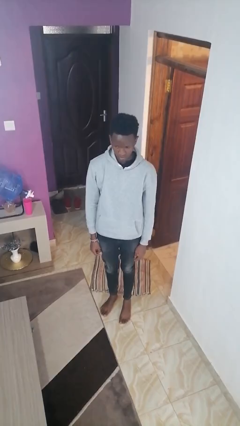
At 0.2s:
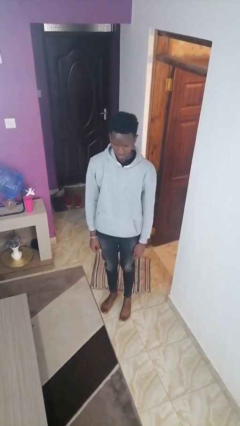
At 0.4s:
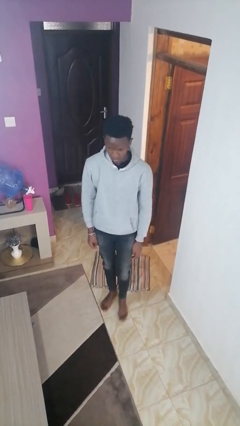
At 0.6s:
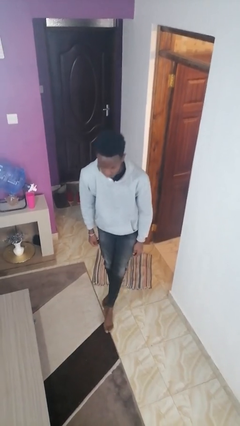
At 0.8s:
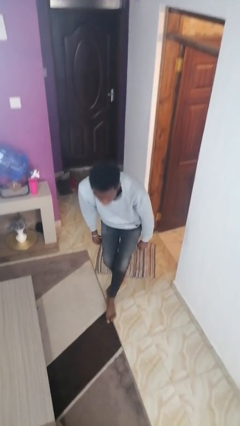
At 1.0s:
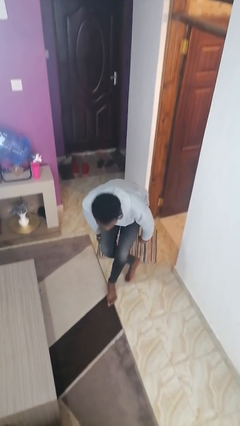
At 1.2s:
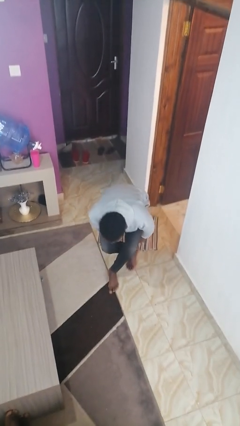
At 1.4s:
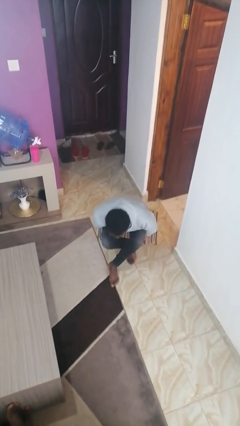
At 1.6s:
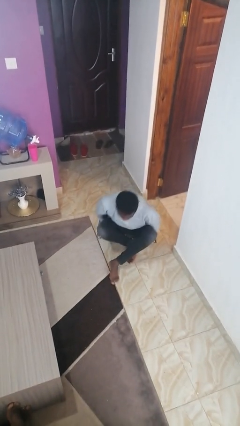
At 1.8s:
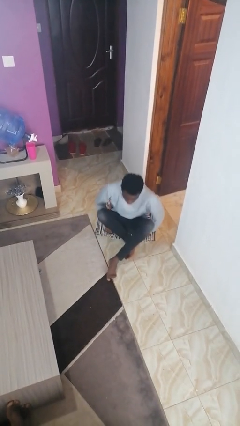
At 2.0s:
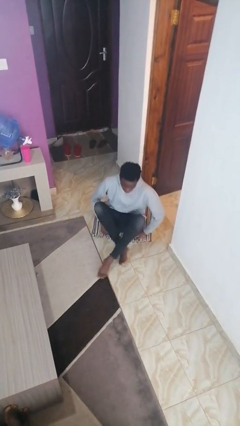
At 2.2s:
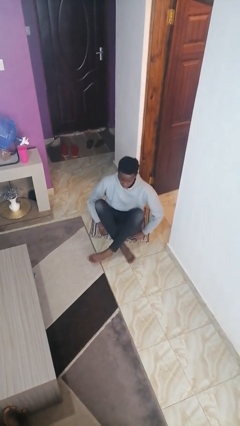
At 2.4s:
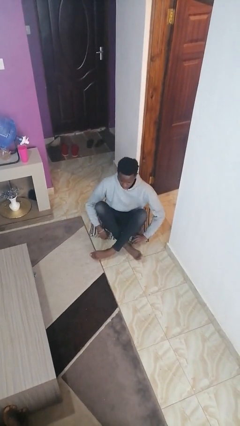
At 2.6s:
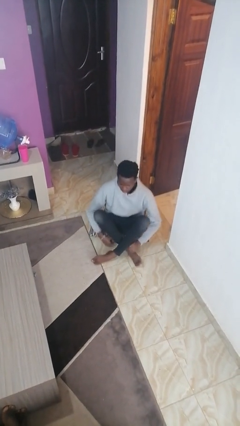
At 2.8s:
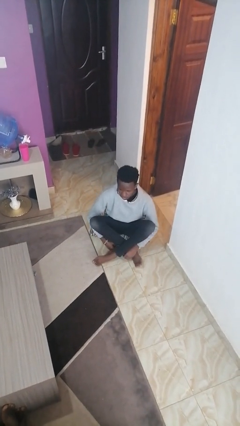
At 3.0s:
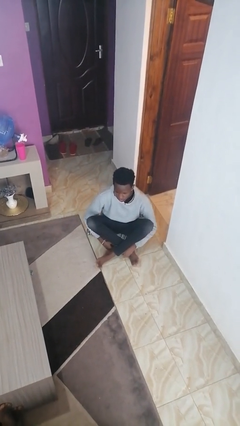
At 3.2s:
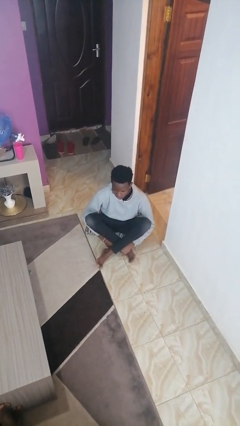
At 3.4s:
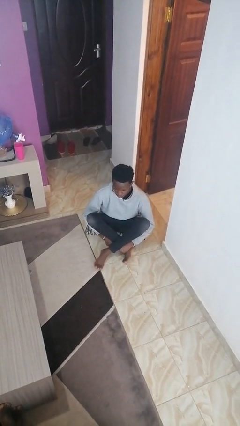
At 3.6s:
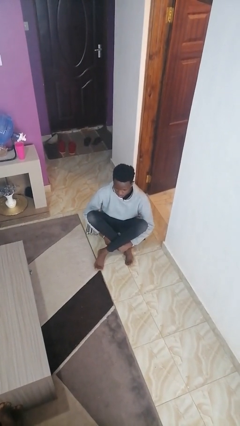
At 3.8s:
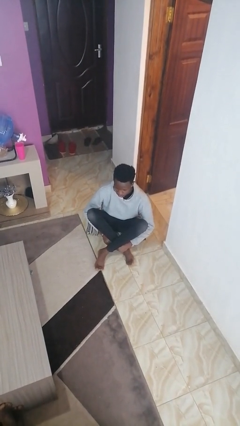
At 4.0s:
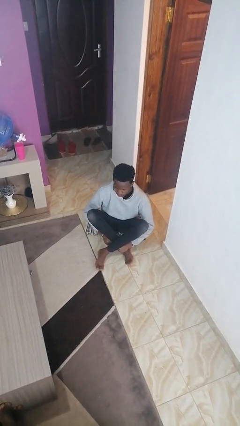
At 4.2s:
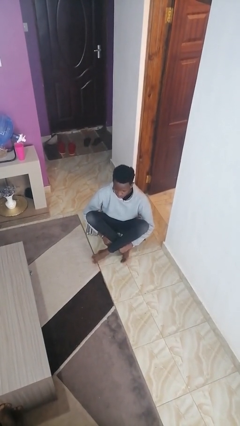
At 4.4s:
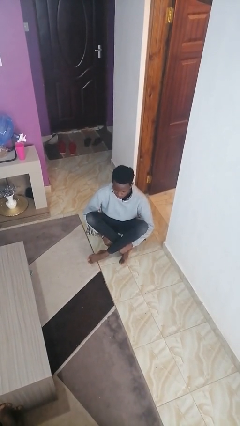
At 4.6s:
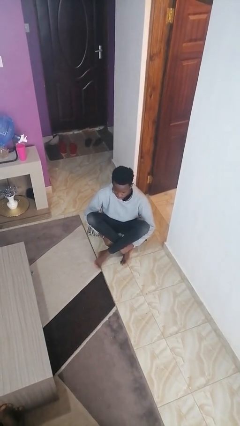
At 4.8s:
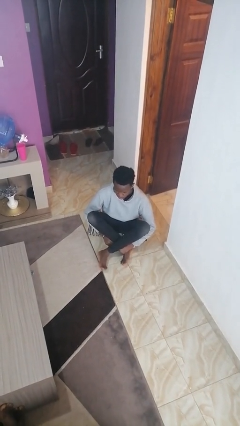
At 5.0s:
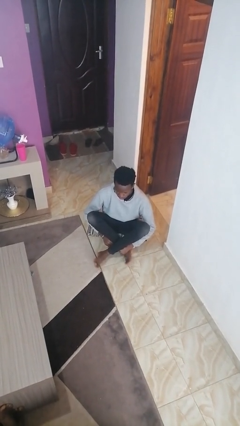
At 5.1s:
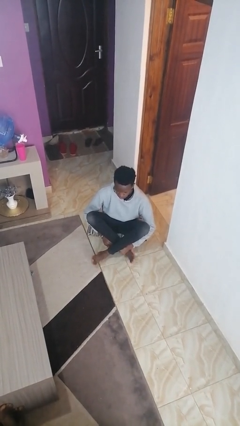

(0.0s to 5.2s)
person sits crisscross

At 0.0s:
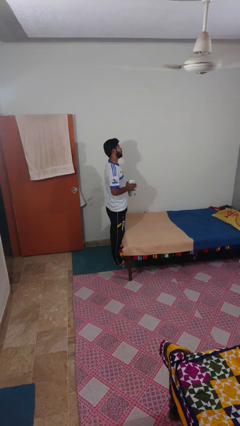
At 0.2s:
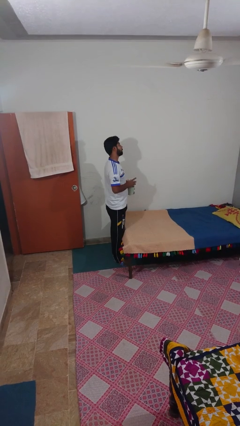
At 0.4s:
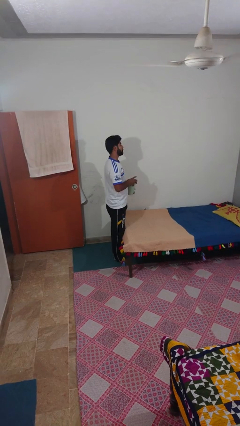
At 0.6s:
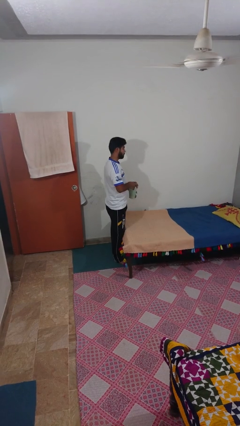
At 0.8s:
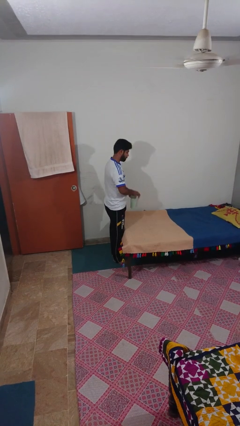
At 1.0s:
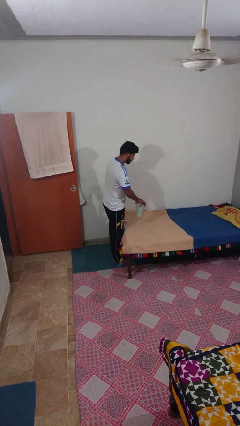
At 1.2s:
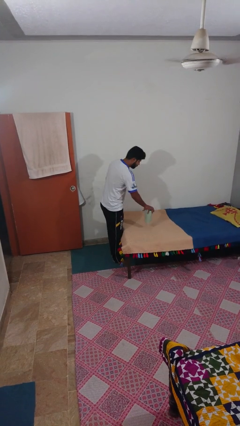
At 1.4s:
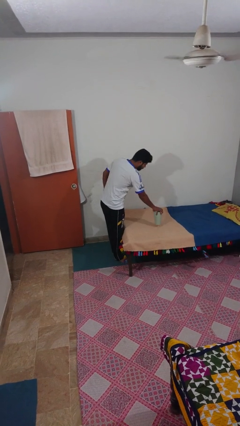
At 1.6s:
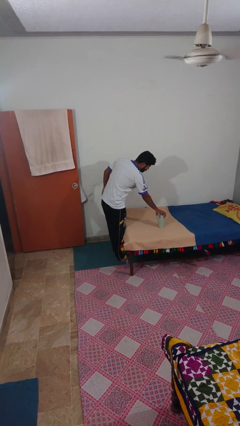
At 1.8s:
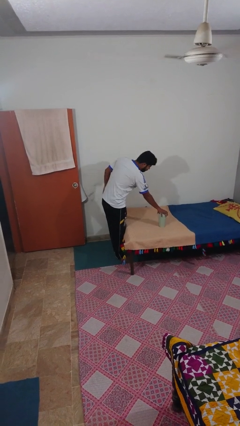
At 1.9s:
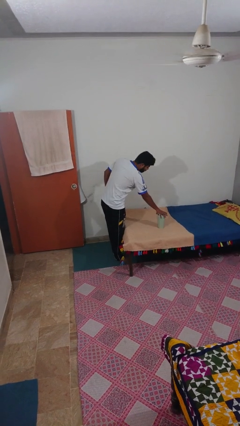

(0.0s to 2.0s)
person puts down object on bed

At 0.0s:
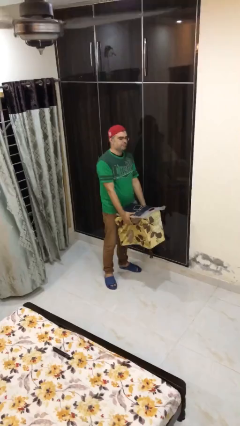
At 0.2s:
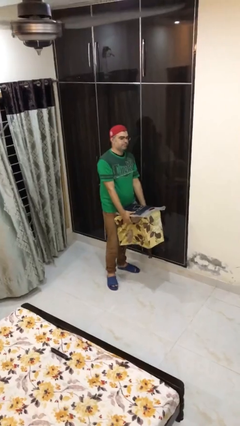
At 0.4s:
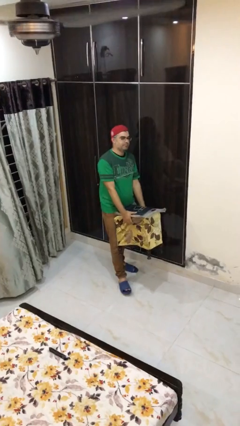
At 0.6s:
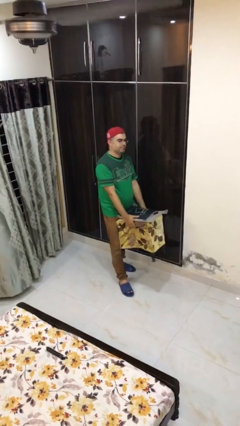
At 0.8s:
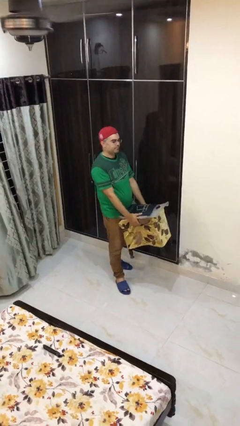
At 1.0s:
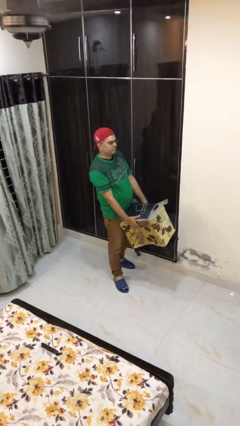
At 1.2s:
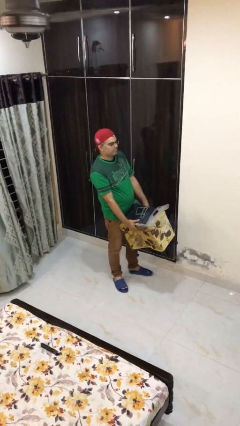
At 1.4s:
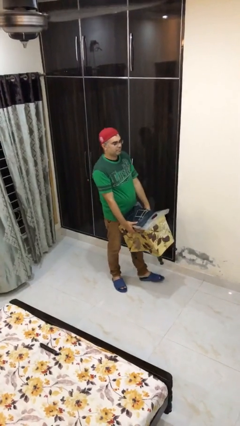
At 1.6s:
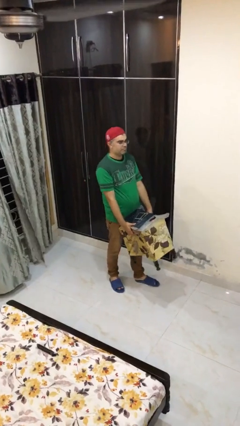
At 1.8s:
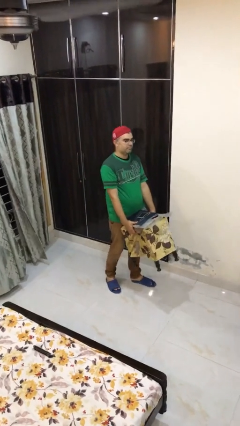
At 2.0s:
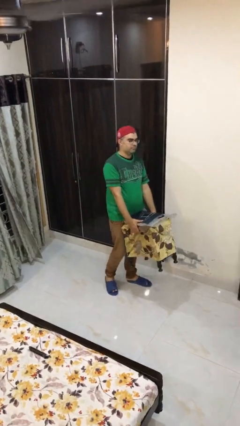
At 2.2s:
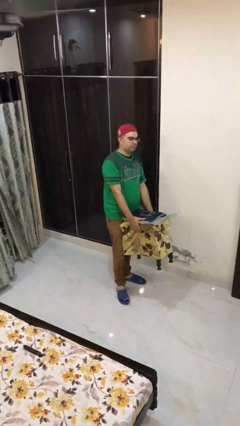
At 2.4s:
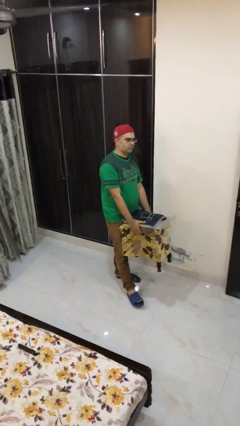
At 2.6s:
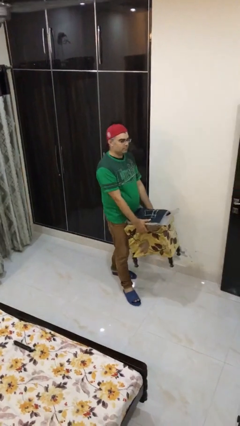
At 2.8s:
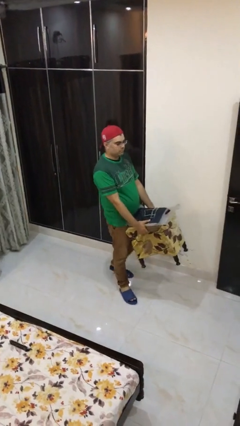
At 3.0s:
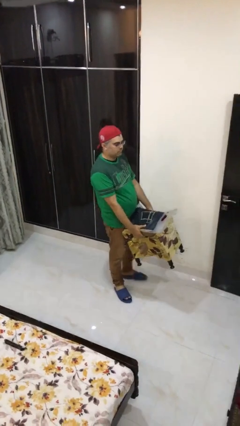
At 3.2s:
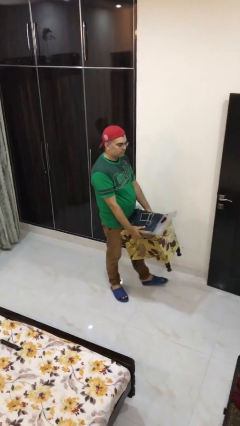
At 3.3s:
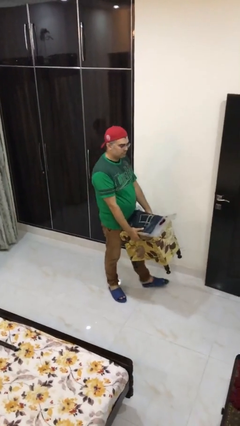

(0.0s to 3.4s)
person carries heavy object

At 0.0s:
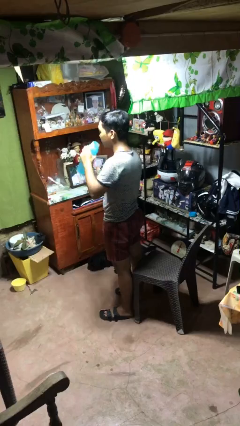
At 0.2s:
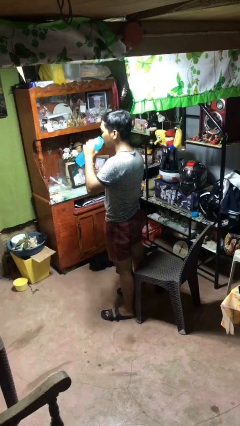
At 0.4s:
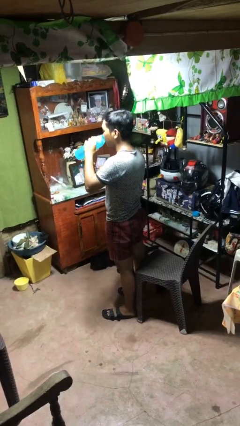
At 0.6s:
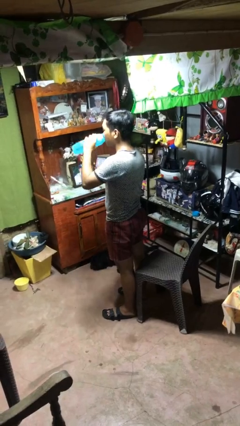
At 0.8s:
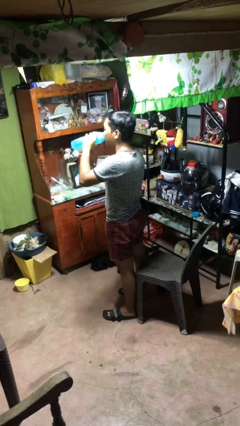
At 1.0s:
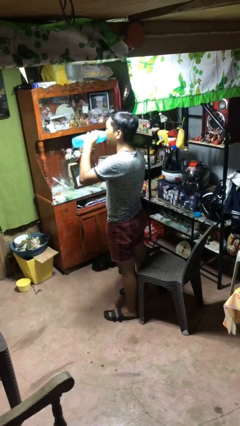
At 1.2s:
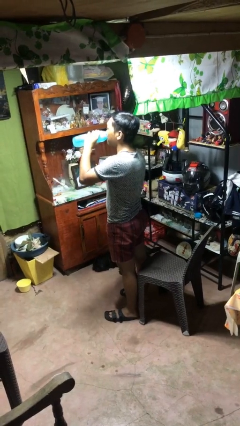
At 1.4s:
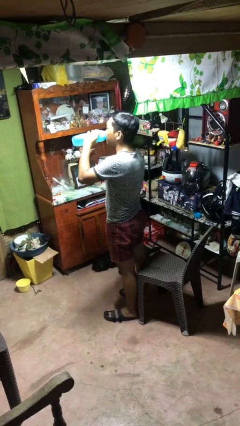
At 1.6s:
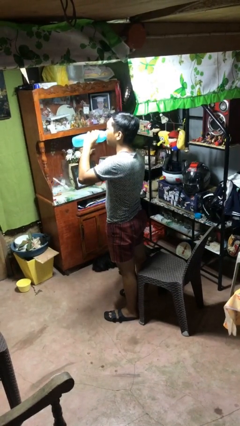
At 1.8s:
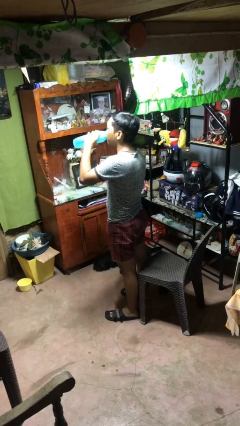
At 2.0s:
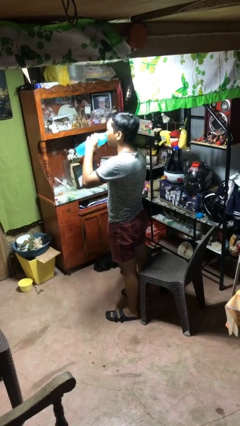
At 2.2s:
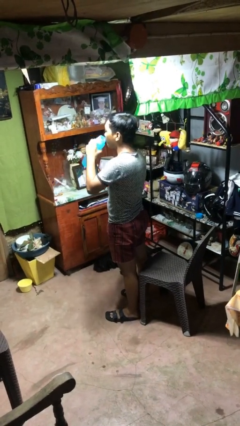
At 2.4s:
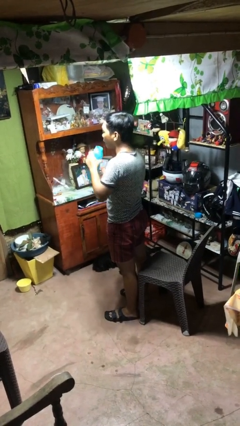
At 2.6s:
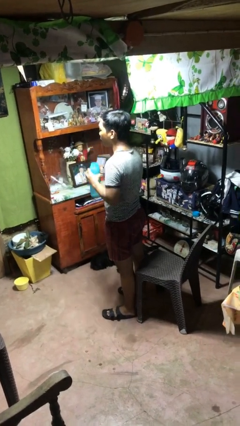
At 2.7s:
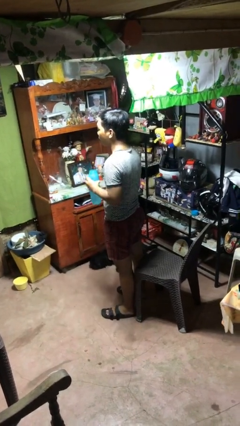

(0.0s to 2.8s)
person drinks from bottle

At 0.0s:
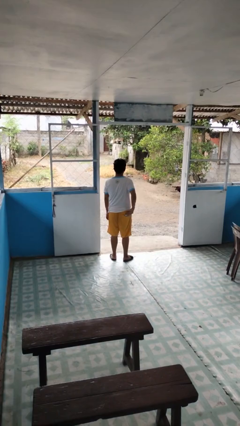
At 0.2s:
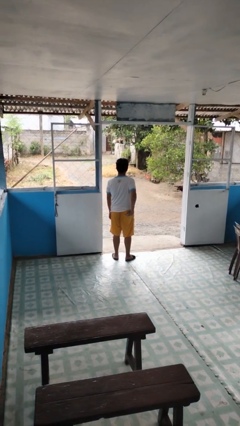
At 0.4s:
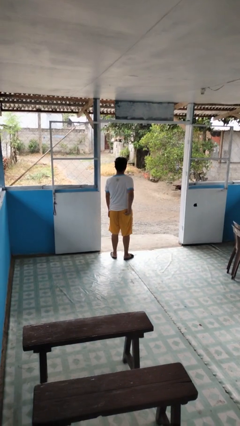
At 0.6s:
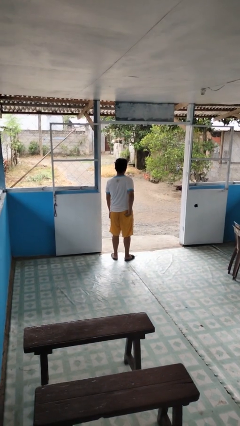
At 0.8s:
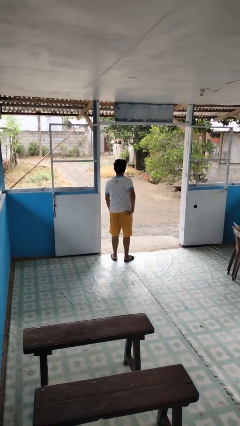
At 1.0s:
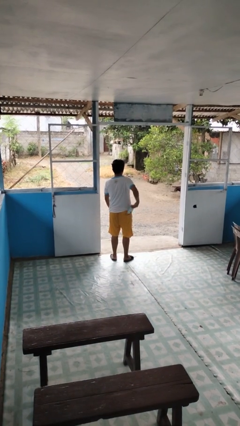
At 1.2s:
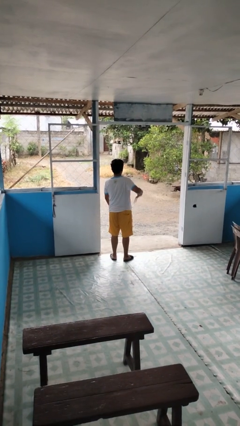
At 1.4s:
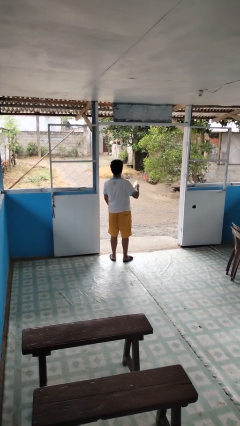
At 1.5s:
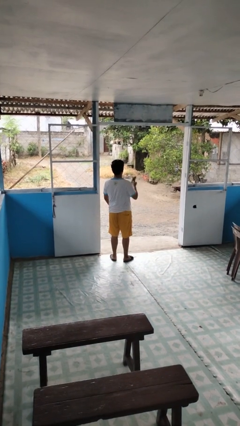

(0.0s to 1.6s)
person takes phone from pocket

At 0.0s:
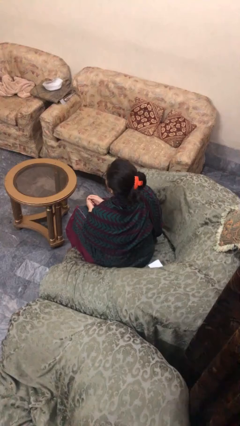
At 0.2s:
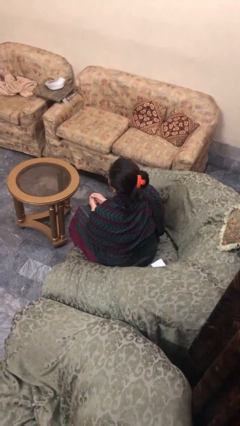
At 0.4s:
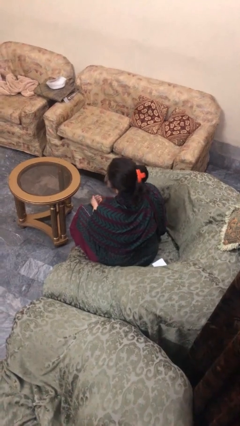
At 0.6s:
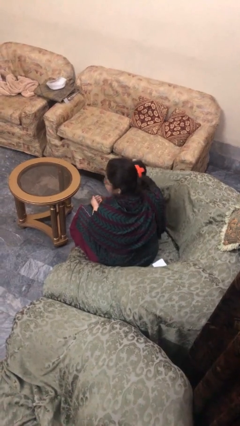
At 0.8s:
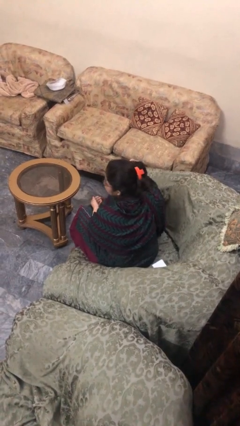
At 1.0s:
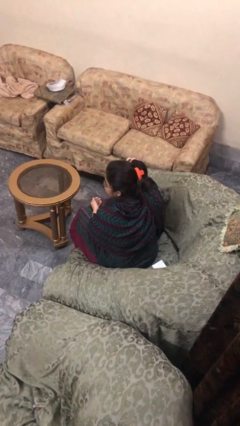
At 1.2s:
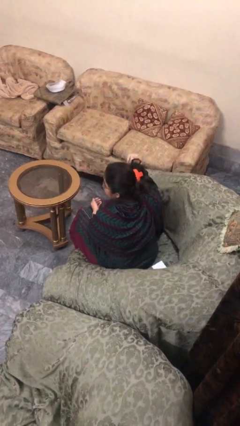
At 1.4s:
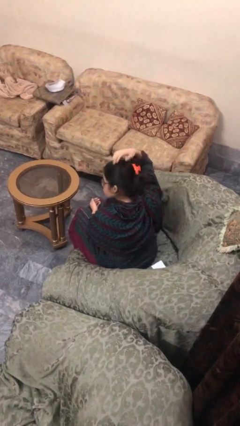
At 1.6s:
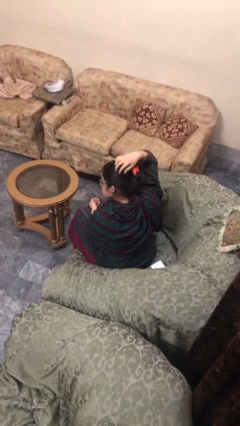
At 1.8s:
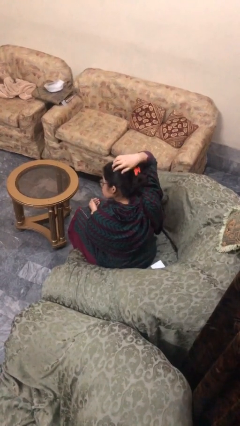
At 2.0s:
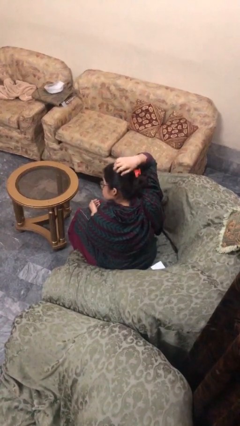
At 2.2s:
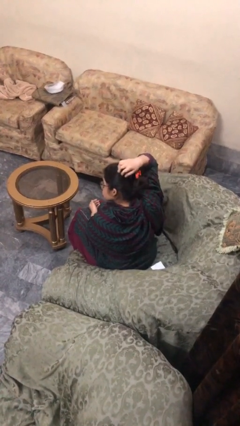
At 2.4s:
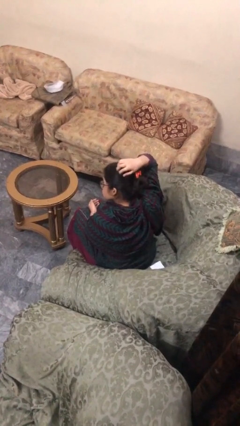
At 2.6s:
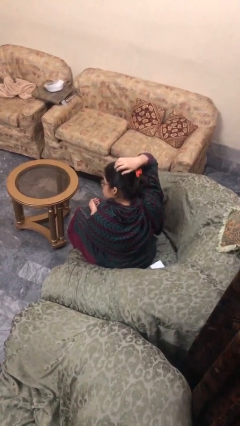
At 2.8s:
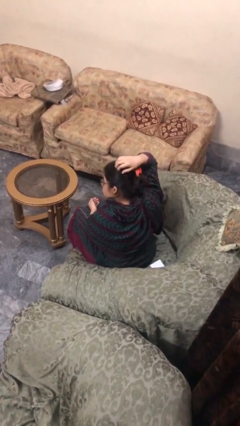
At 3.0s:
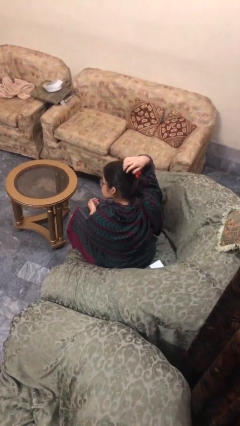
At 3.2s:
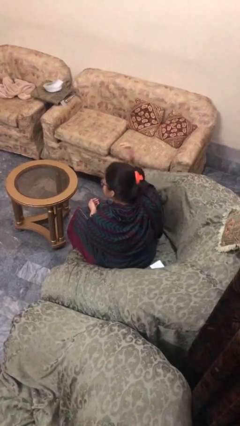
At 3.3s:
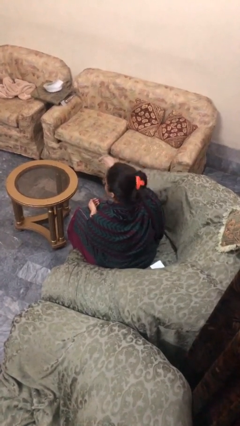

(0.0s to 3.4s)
person strokes hair
